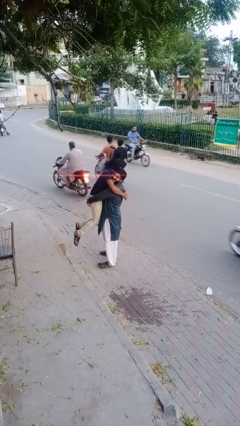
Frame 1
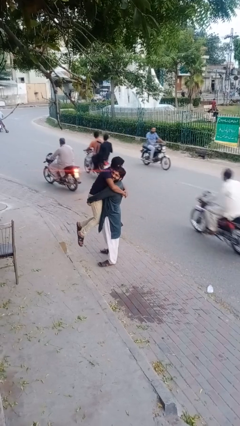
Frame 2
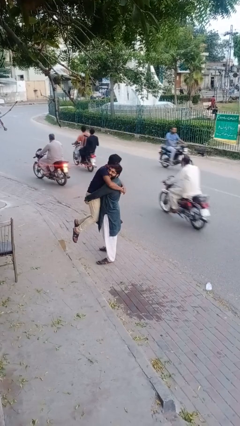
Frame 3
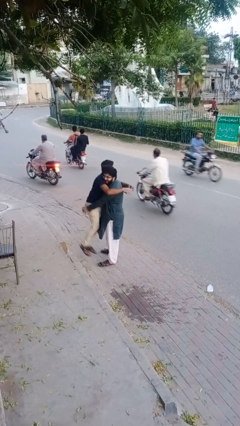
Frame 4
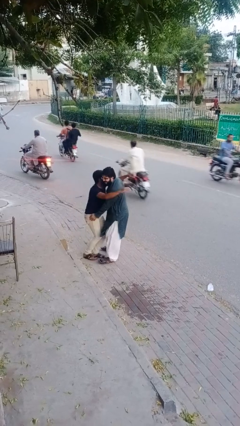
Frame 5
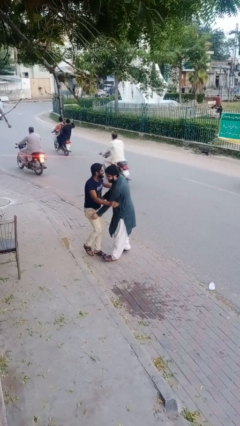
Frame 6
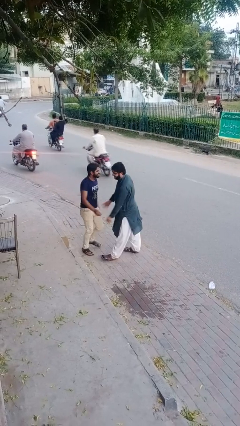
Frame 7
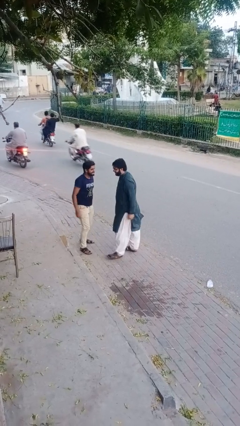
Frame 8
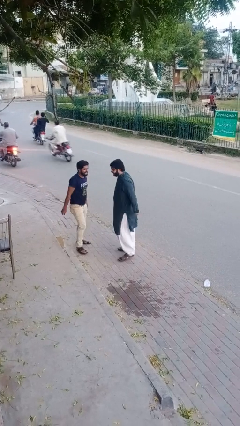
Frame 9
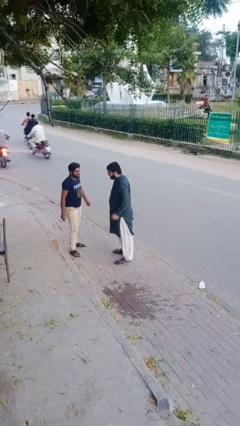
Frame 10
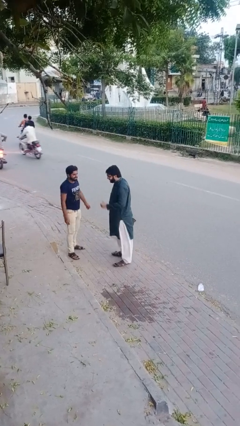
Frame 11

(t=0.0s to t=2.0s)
person puts down person

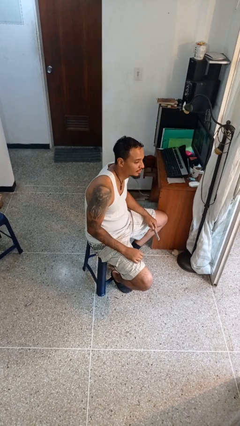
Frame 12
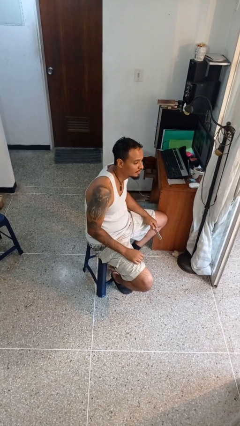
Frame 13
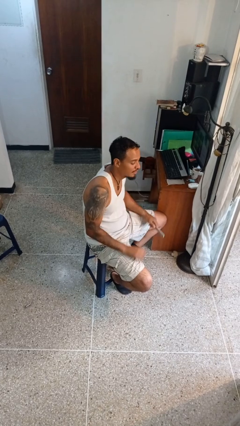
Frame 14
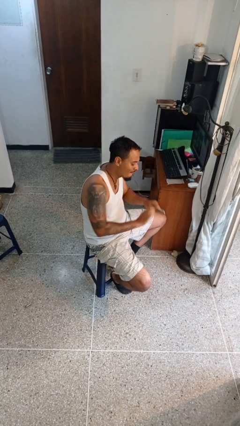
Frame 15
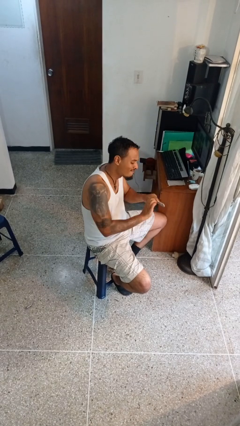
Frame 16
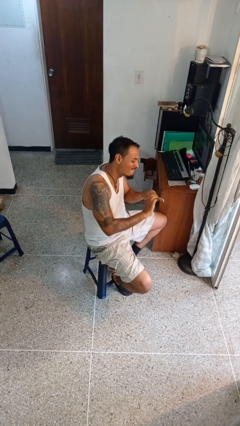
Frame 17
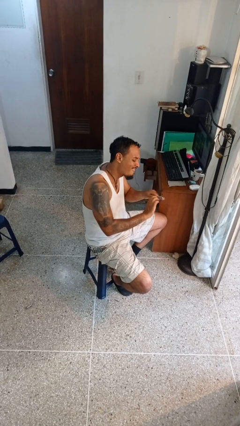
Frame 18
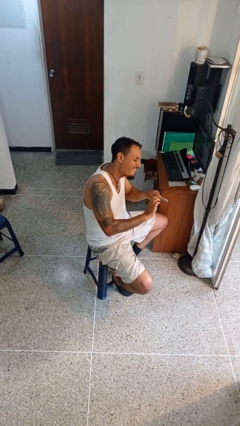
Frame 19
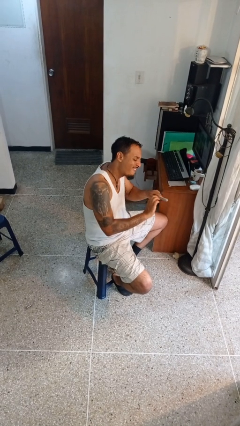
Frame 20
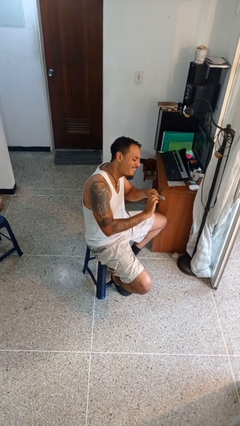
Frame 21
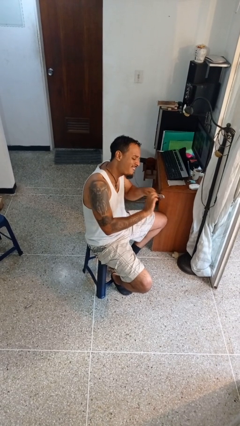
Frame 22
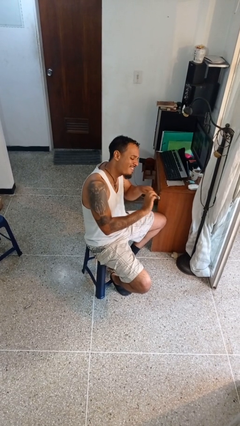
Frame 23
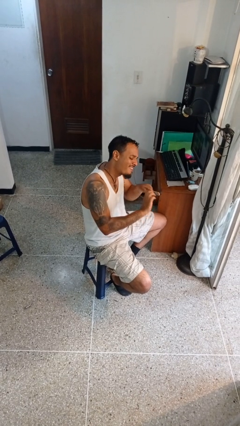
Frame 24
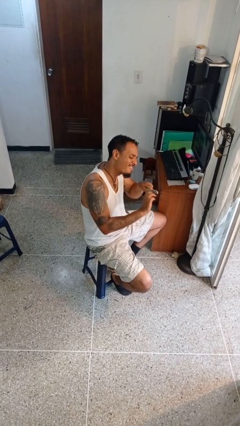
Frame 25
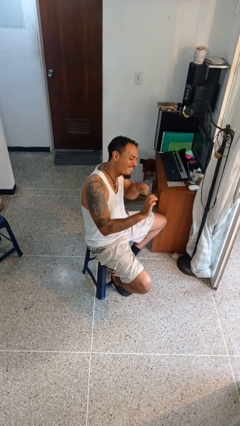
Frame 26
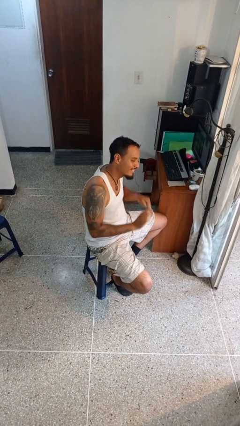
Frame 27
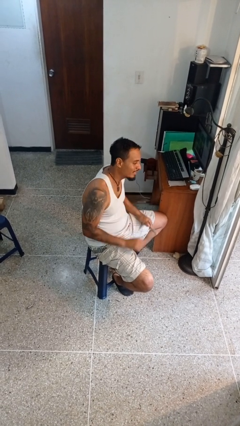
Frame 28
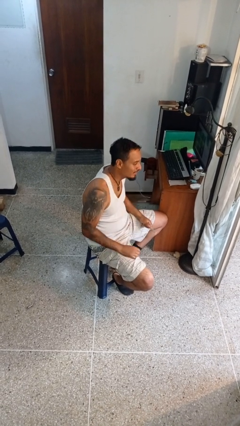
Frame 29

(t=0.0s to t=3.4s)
person files fingernails

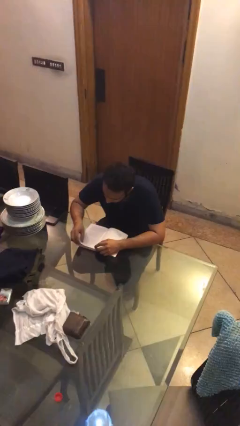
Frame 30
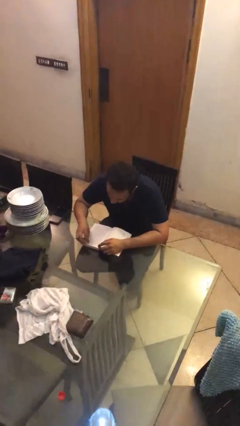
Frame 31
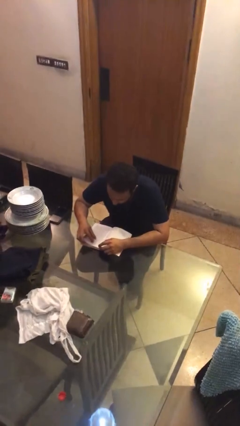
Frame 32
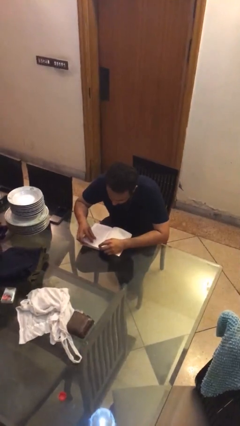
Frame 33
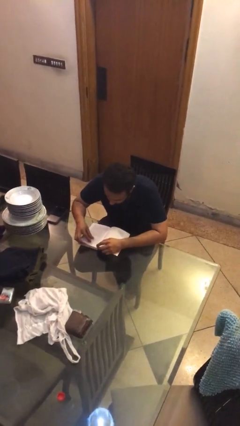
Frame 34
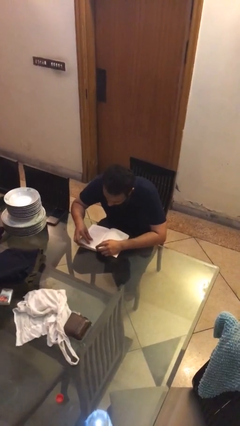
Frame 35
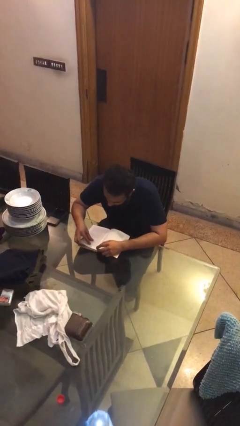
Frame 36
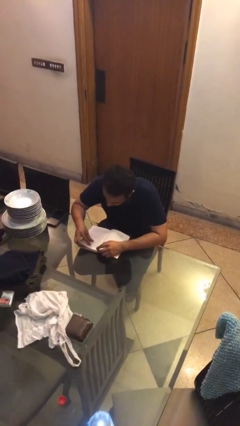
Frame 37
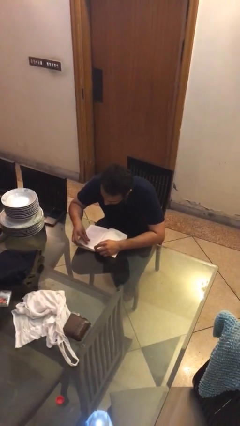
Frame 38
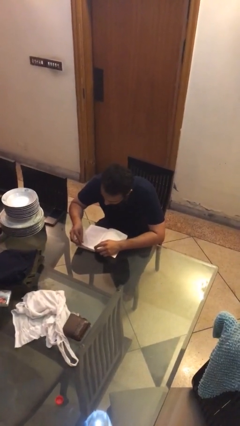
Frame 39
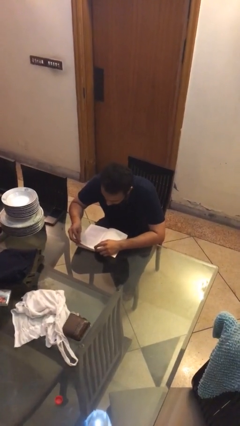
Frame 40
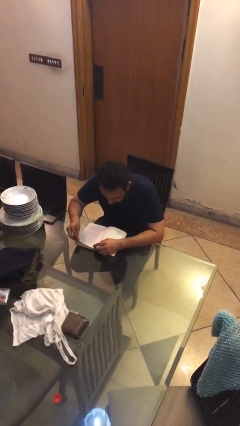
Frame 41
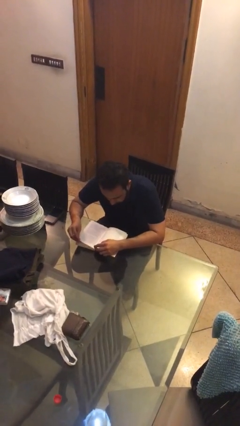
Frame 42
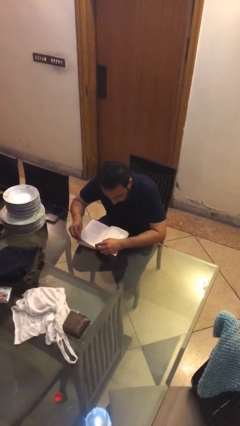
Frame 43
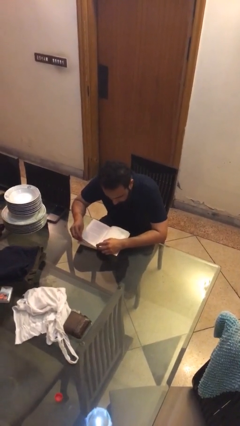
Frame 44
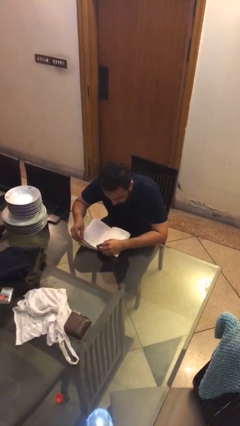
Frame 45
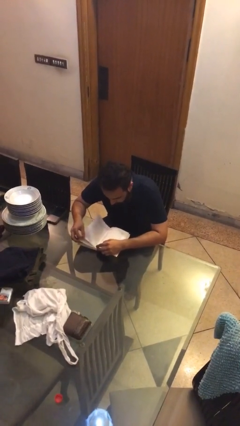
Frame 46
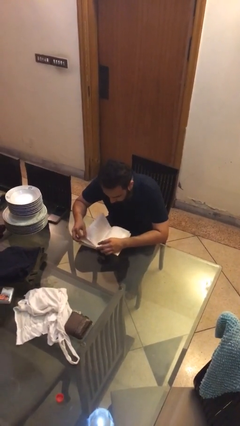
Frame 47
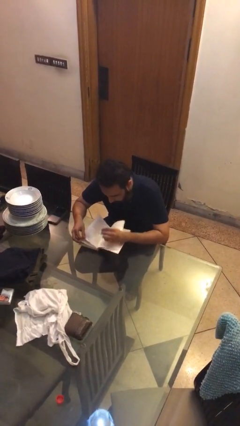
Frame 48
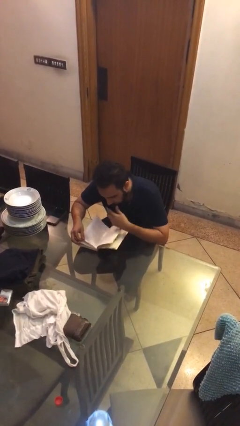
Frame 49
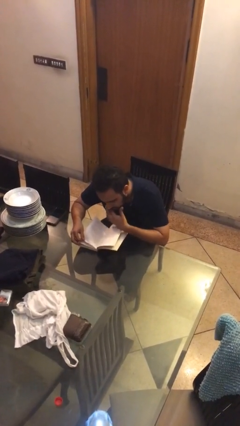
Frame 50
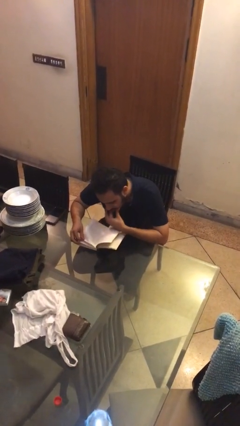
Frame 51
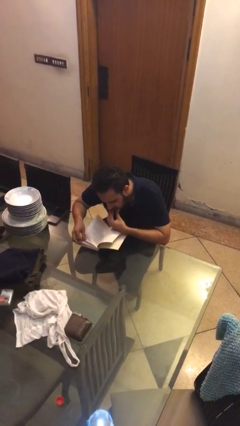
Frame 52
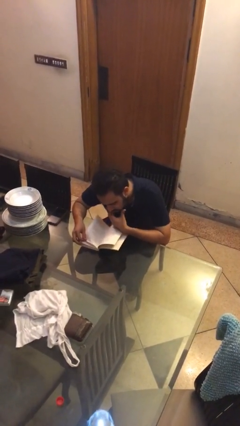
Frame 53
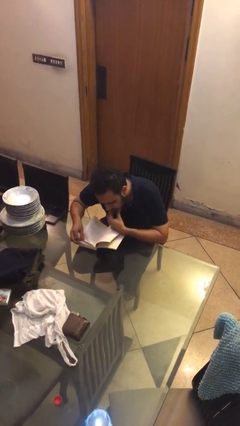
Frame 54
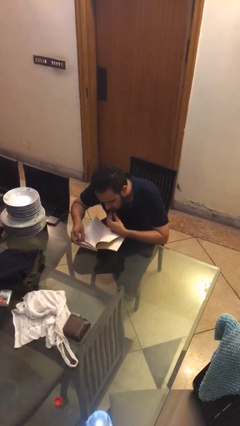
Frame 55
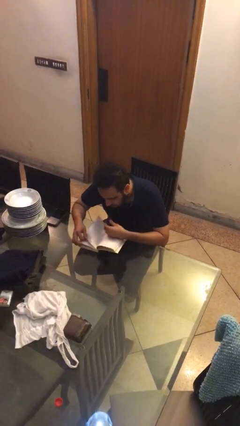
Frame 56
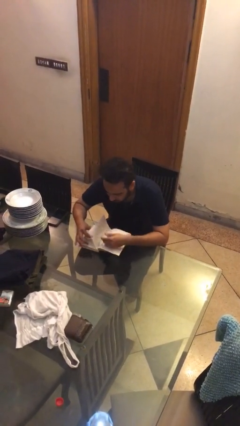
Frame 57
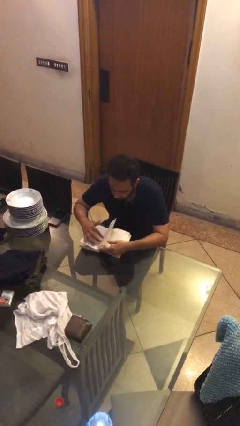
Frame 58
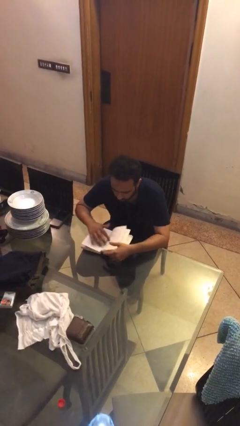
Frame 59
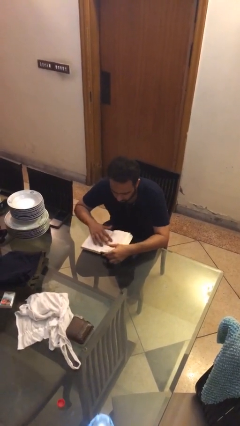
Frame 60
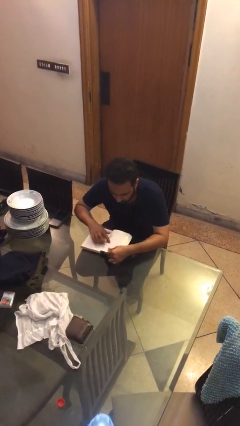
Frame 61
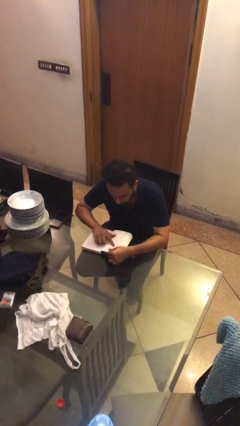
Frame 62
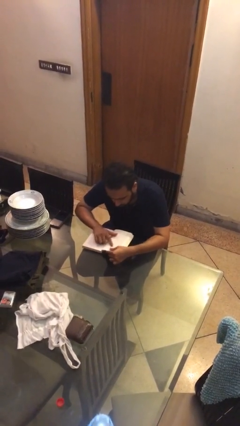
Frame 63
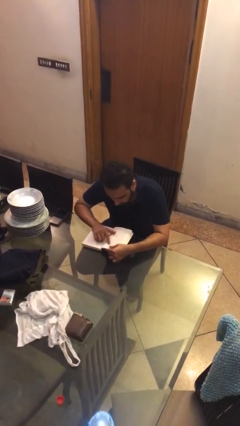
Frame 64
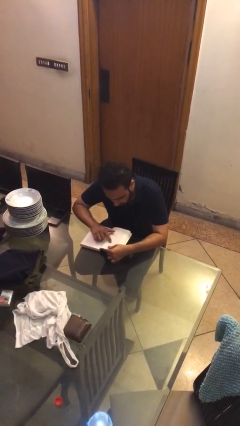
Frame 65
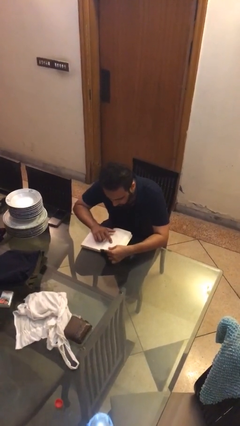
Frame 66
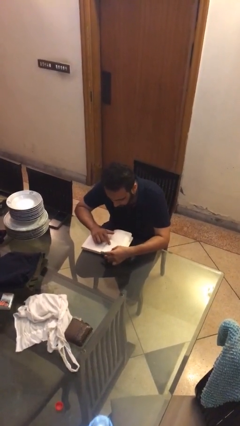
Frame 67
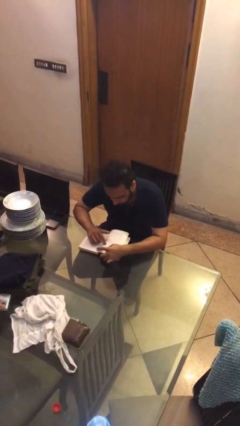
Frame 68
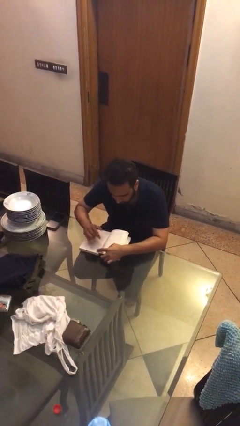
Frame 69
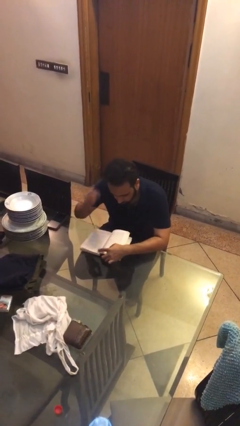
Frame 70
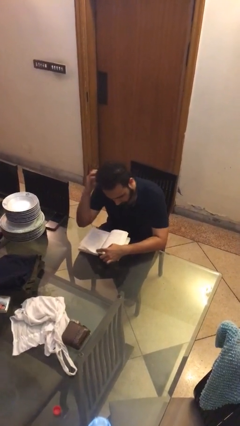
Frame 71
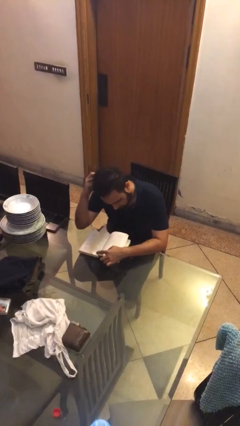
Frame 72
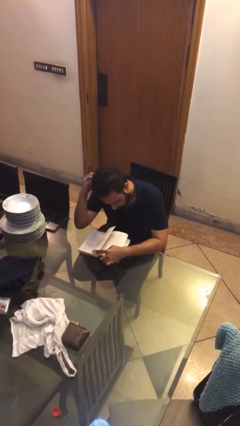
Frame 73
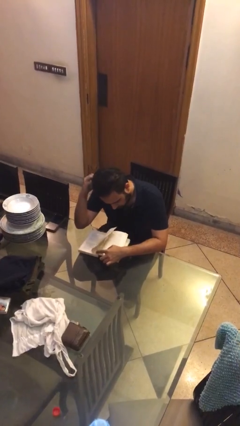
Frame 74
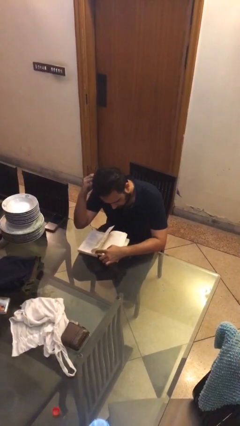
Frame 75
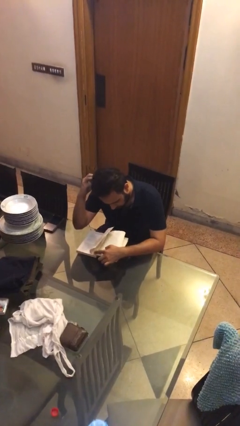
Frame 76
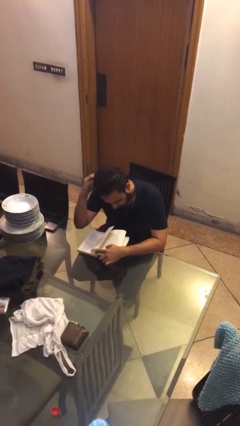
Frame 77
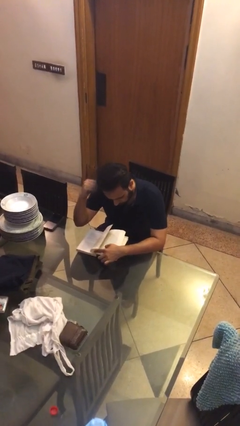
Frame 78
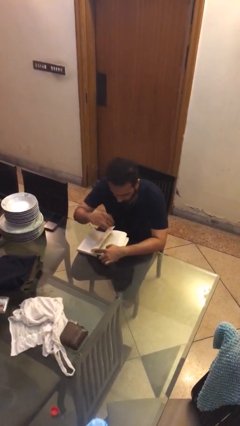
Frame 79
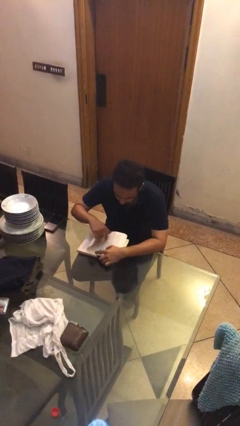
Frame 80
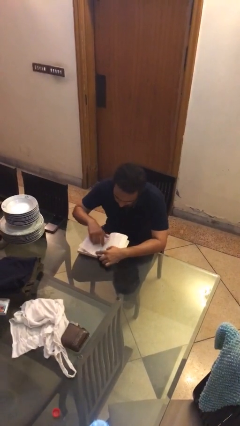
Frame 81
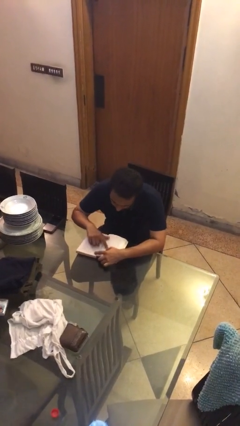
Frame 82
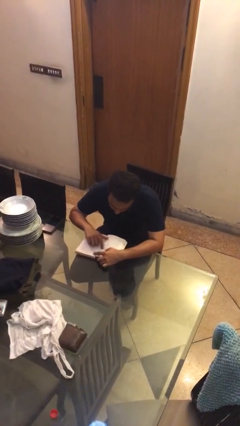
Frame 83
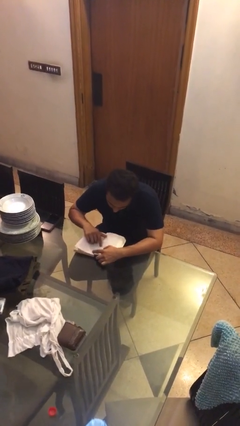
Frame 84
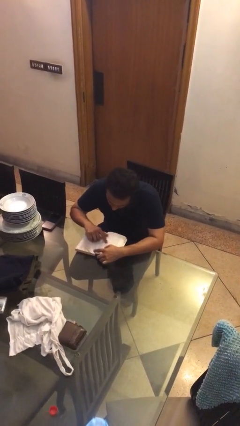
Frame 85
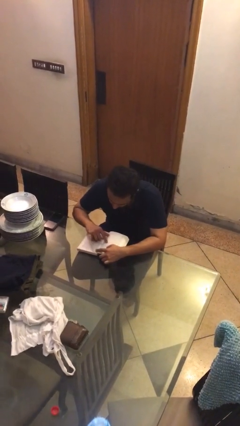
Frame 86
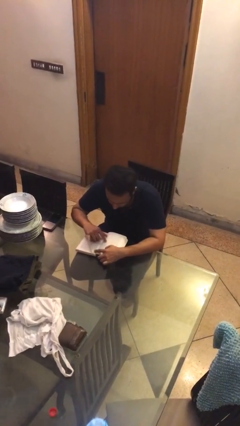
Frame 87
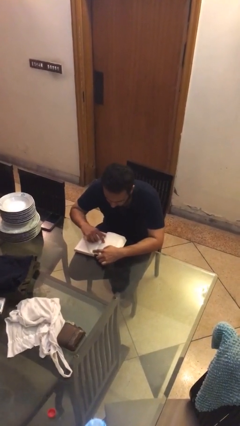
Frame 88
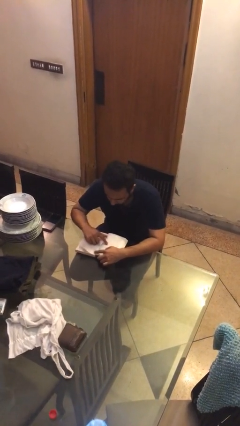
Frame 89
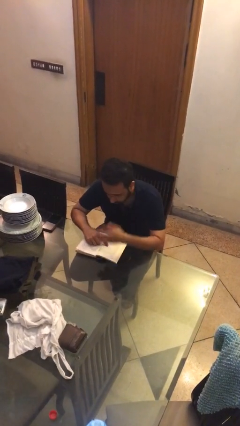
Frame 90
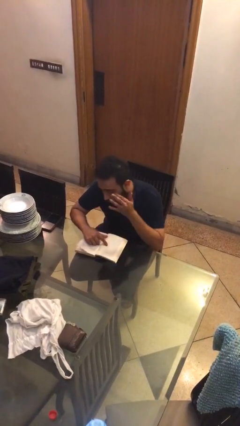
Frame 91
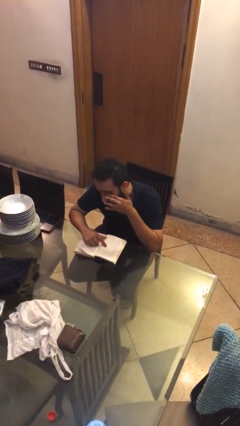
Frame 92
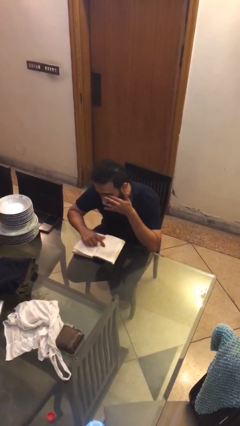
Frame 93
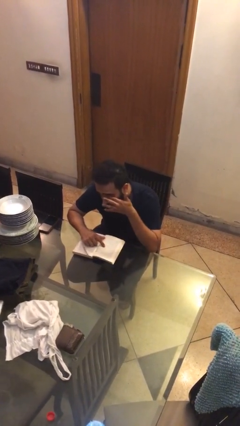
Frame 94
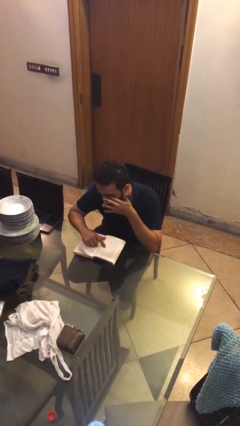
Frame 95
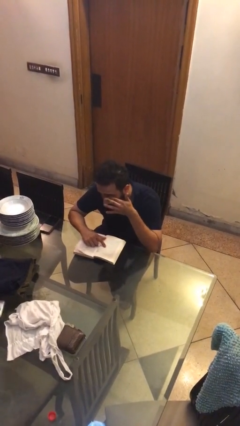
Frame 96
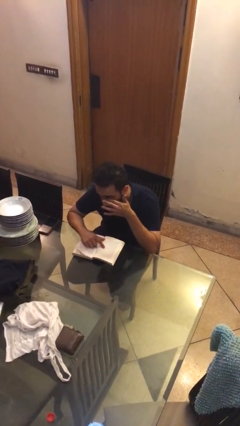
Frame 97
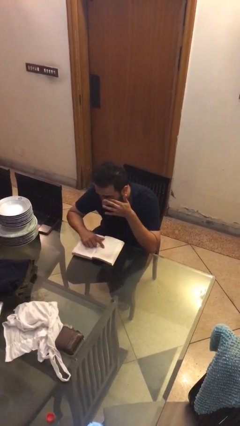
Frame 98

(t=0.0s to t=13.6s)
person reads document
